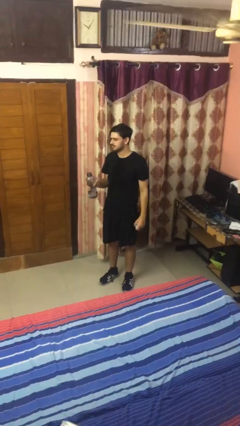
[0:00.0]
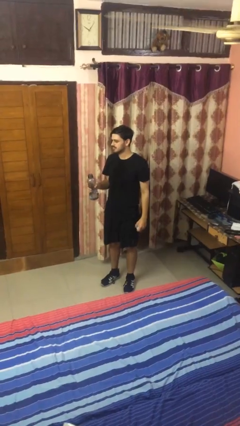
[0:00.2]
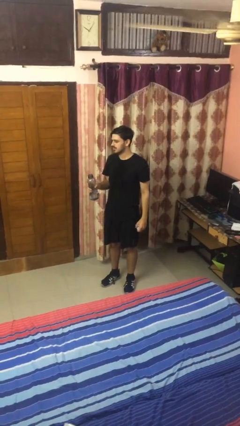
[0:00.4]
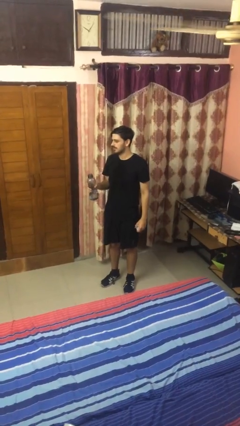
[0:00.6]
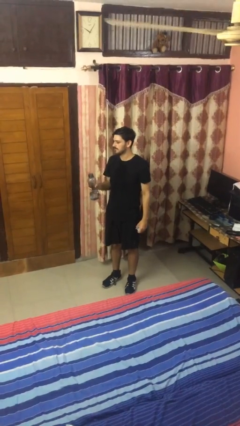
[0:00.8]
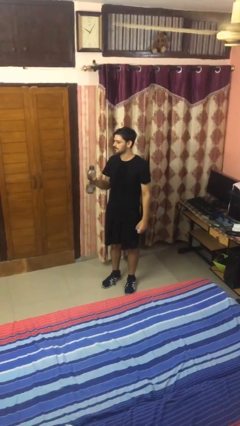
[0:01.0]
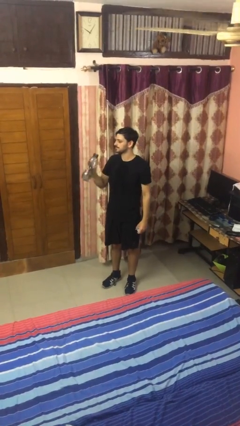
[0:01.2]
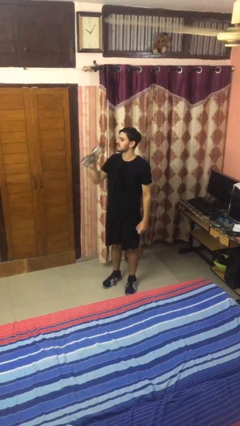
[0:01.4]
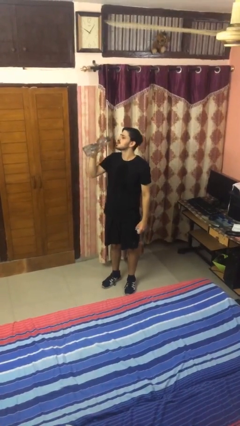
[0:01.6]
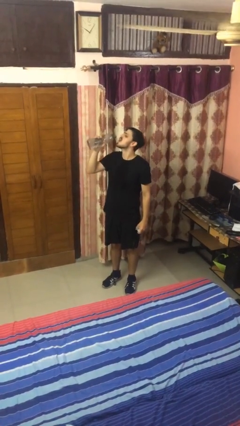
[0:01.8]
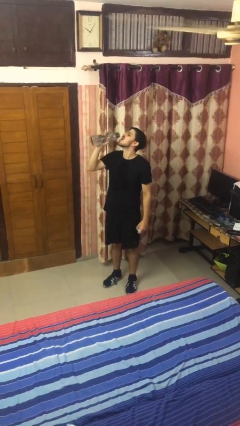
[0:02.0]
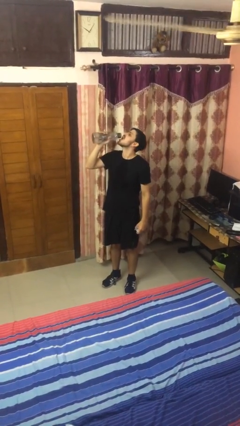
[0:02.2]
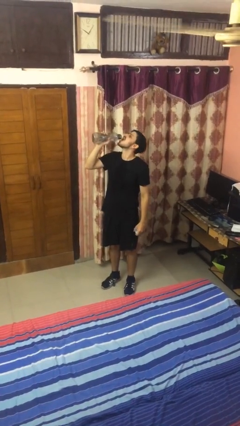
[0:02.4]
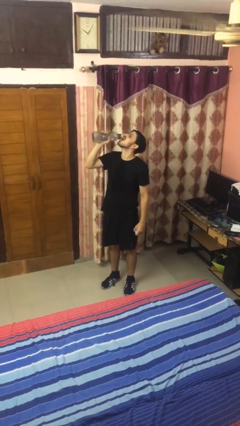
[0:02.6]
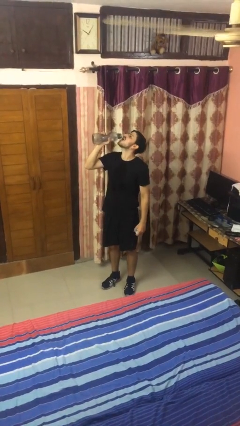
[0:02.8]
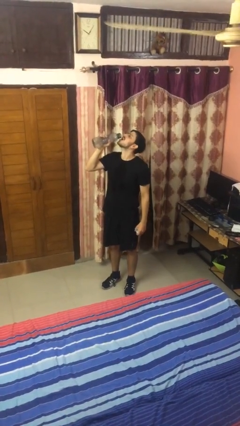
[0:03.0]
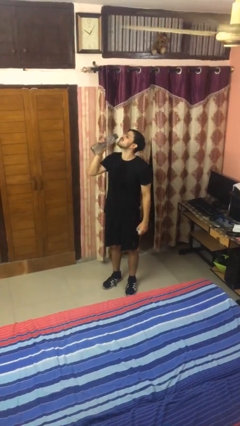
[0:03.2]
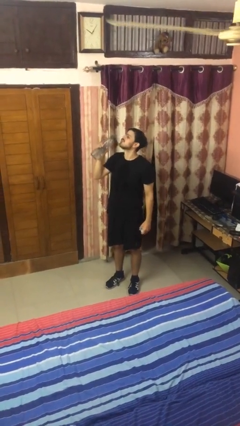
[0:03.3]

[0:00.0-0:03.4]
person drinks from bottle

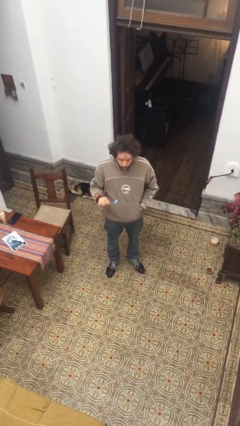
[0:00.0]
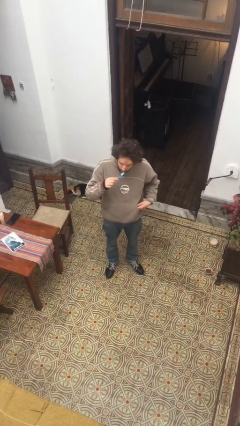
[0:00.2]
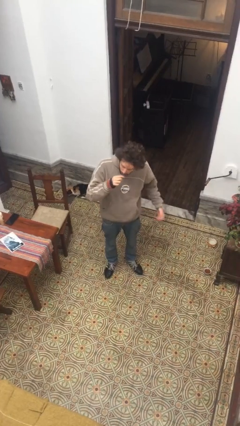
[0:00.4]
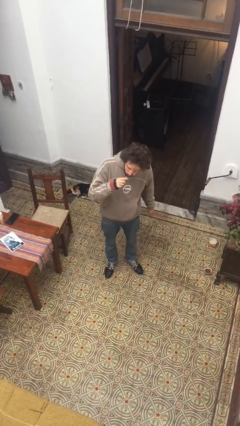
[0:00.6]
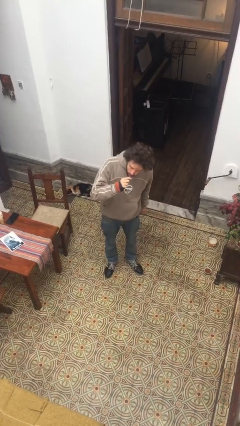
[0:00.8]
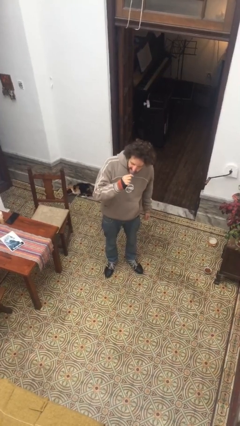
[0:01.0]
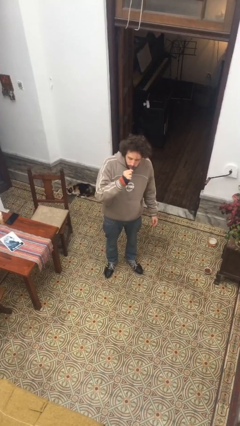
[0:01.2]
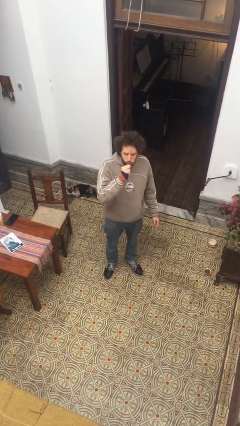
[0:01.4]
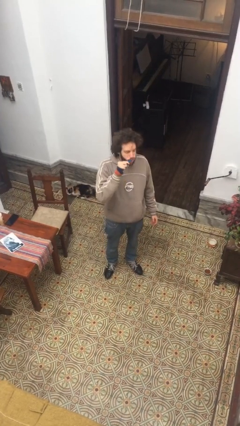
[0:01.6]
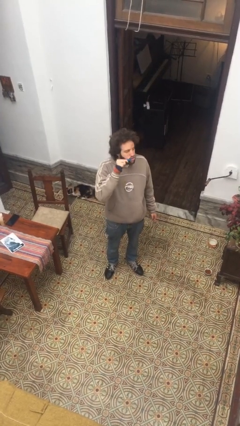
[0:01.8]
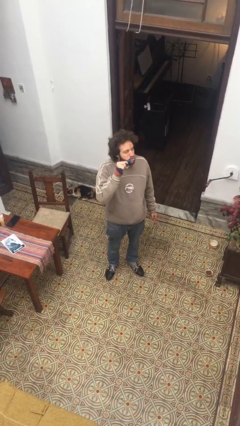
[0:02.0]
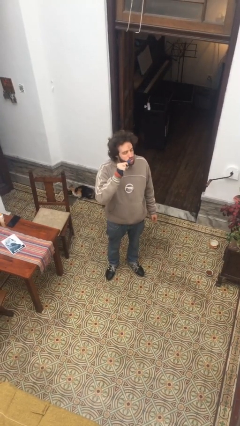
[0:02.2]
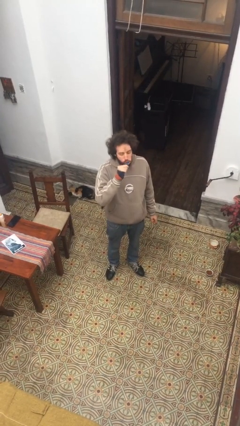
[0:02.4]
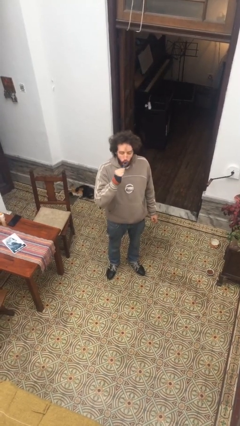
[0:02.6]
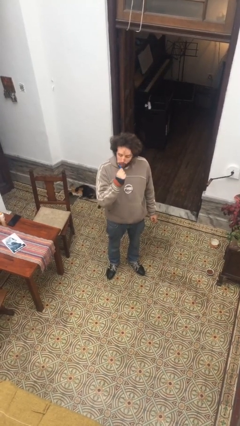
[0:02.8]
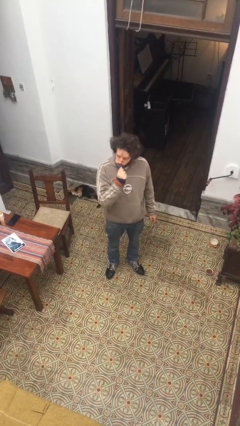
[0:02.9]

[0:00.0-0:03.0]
person brushes teeth

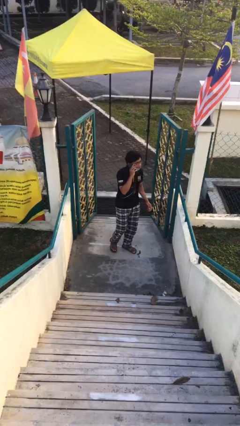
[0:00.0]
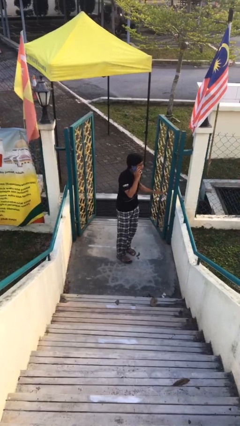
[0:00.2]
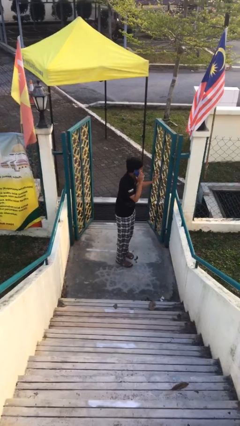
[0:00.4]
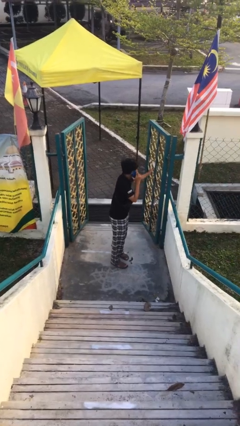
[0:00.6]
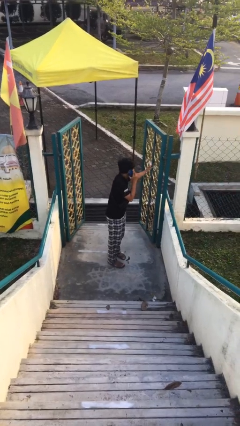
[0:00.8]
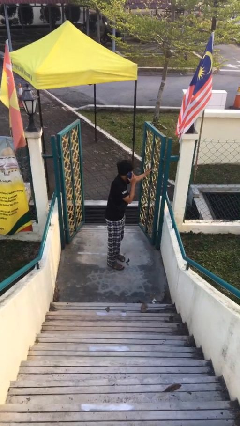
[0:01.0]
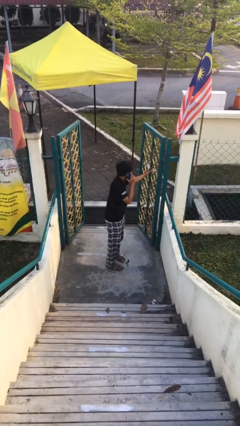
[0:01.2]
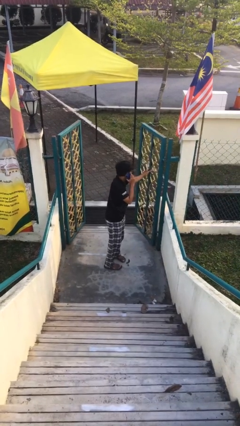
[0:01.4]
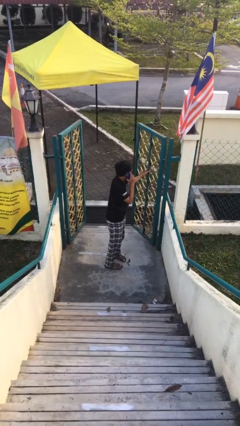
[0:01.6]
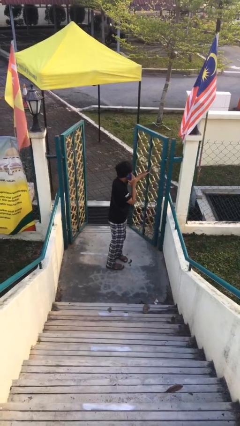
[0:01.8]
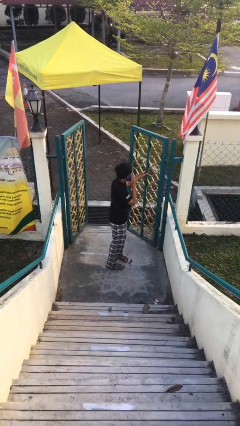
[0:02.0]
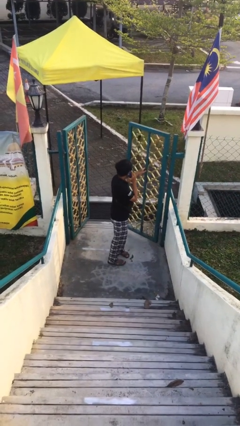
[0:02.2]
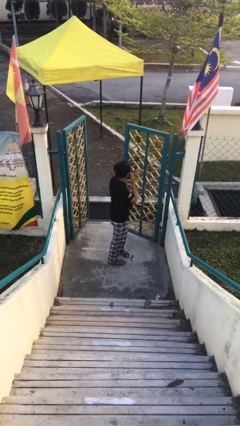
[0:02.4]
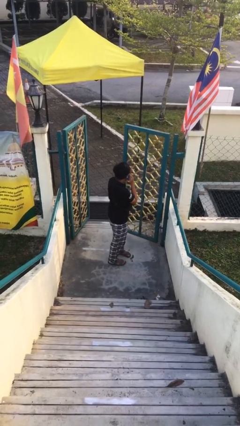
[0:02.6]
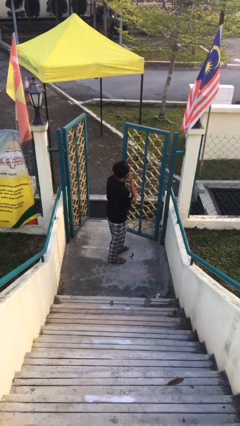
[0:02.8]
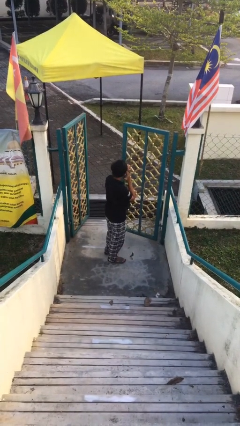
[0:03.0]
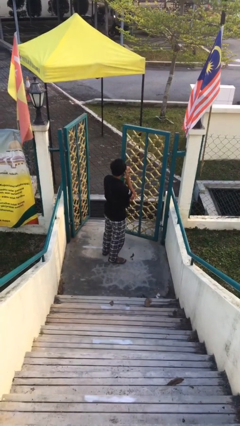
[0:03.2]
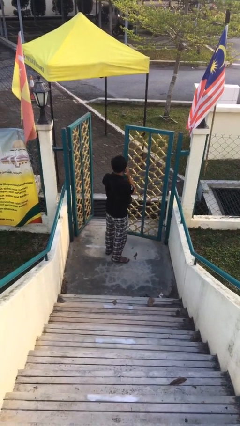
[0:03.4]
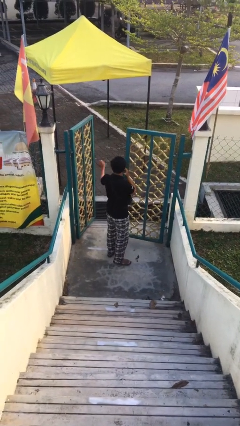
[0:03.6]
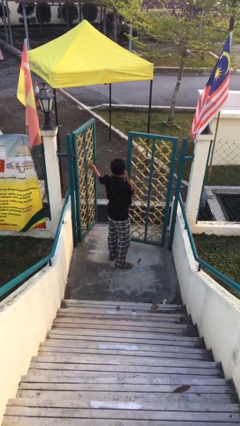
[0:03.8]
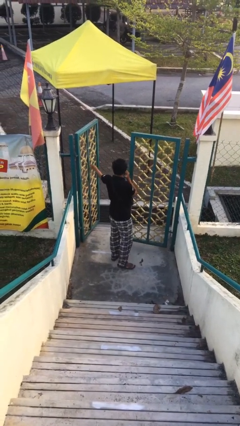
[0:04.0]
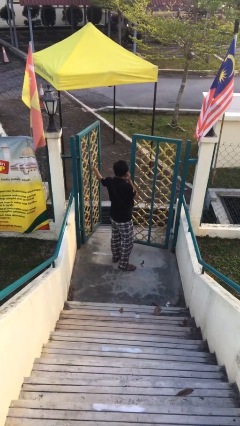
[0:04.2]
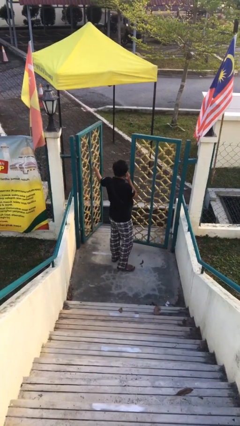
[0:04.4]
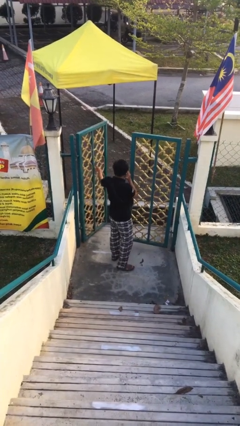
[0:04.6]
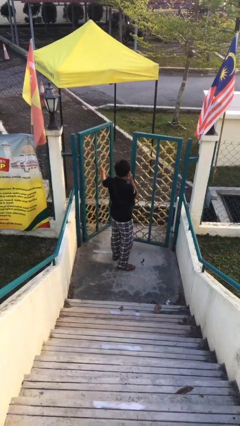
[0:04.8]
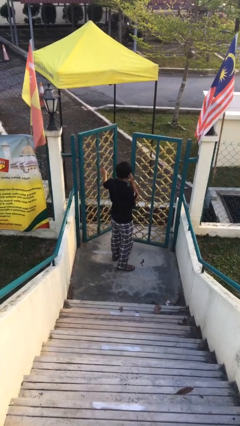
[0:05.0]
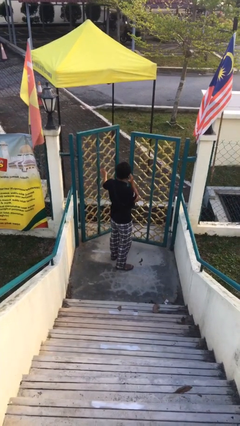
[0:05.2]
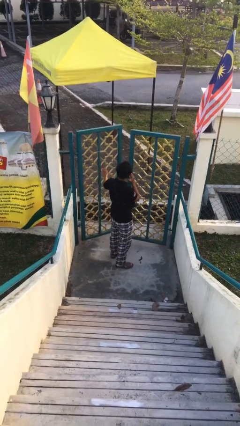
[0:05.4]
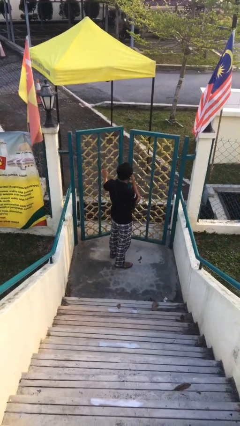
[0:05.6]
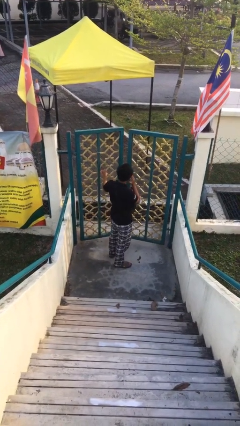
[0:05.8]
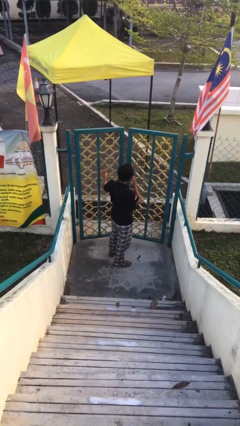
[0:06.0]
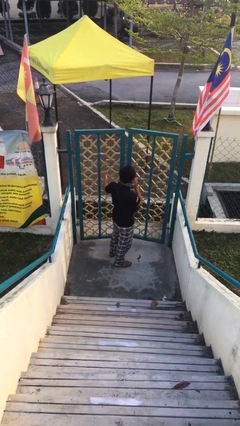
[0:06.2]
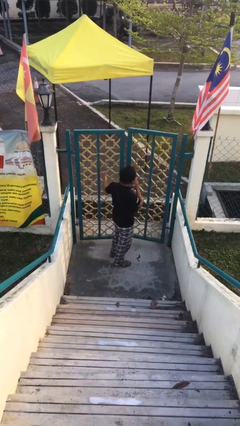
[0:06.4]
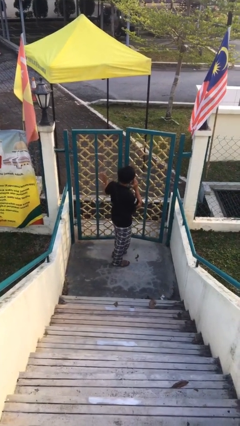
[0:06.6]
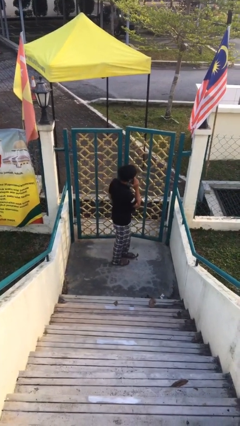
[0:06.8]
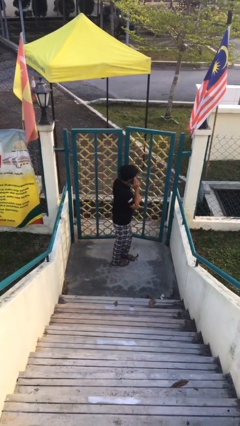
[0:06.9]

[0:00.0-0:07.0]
person closes facility door

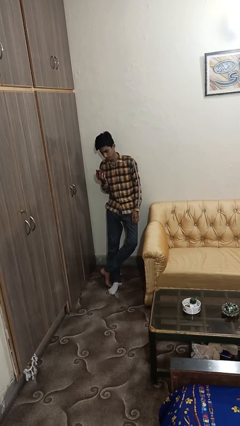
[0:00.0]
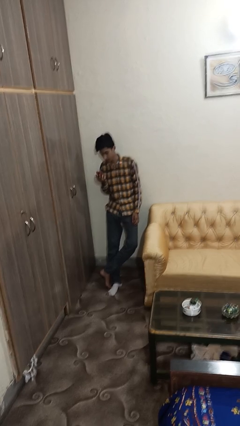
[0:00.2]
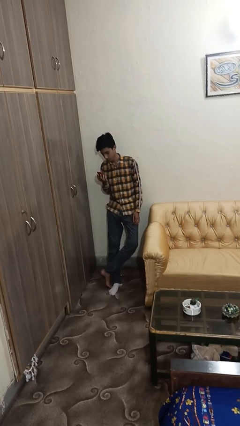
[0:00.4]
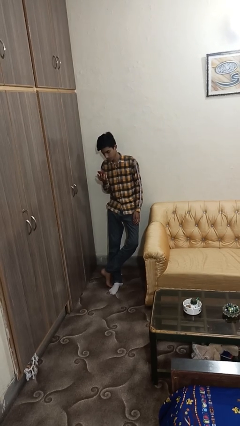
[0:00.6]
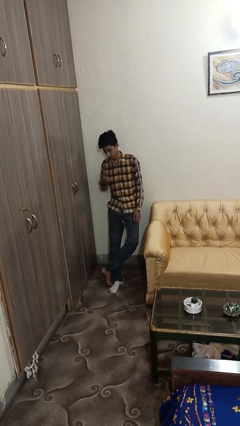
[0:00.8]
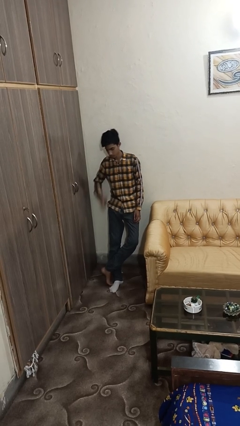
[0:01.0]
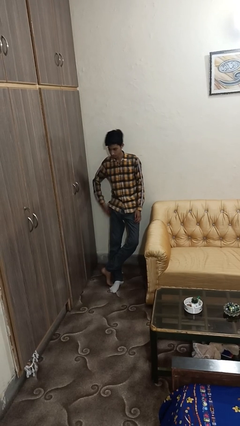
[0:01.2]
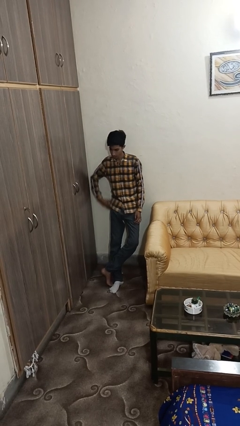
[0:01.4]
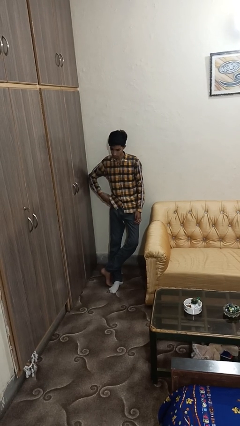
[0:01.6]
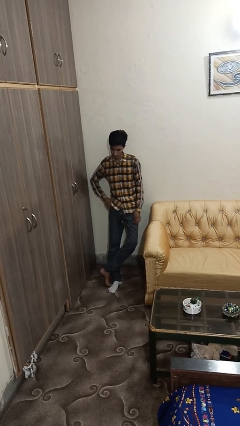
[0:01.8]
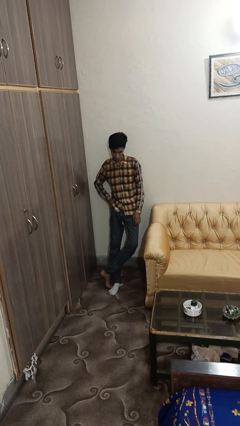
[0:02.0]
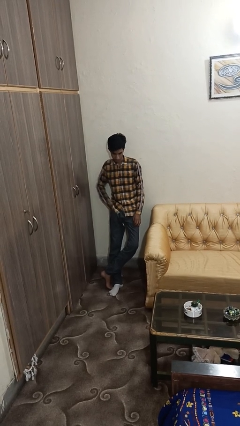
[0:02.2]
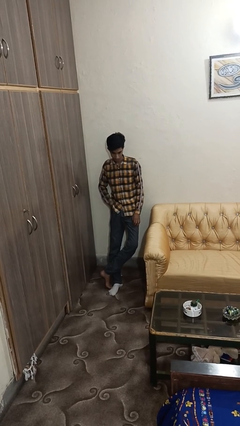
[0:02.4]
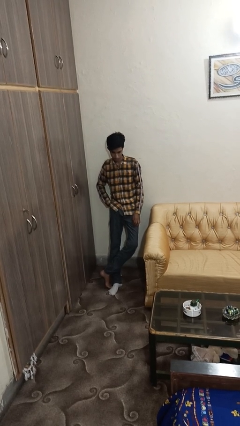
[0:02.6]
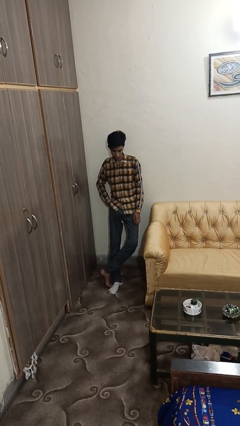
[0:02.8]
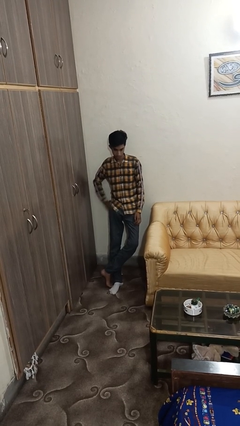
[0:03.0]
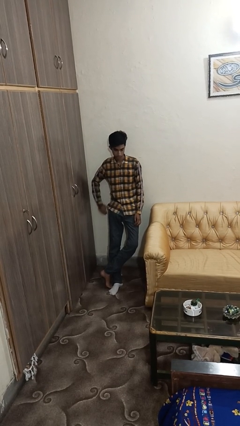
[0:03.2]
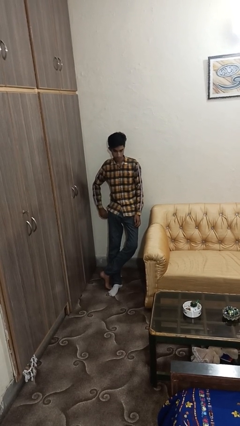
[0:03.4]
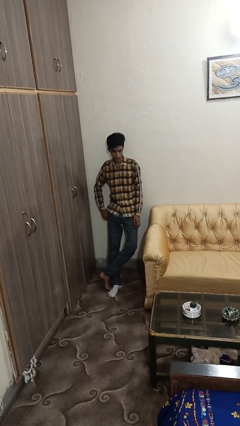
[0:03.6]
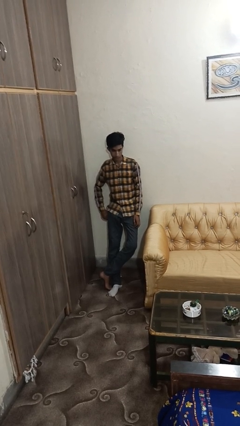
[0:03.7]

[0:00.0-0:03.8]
person puts phone into pocket
